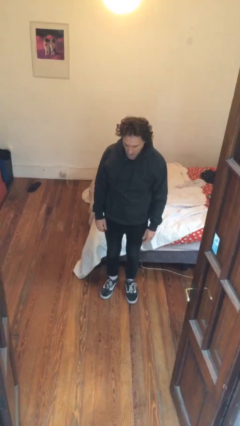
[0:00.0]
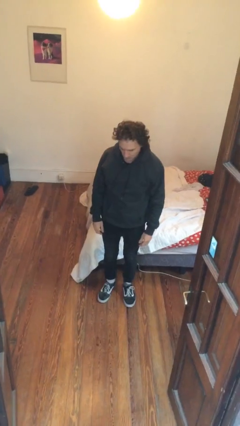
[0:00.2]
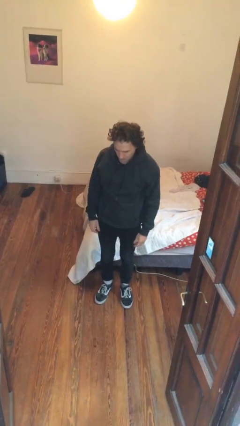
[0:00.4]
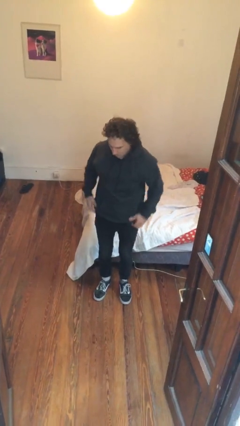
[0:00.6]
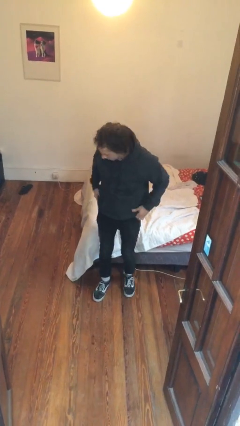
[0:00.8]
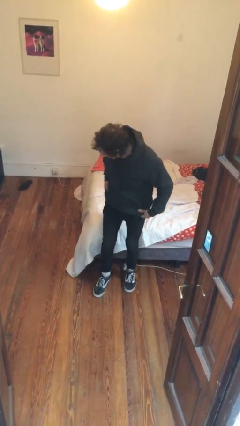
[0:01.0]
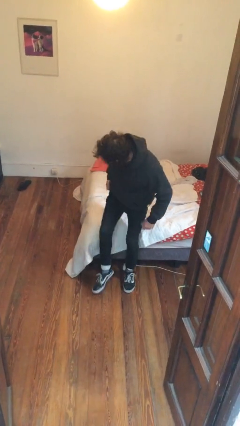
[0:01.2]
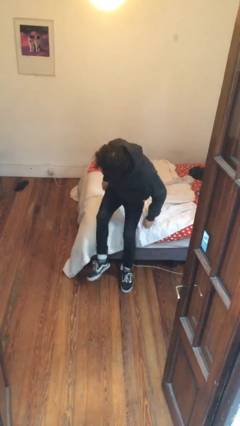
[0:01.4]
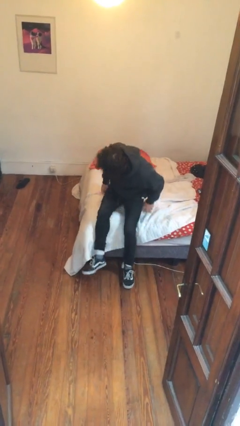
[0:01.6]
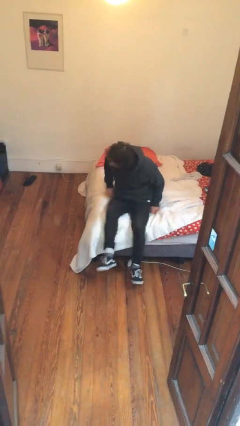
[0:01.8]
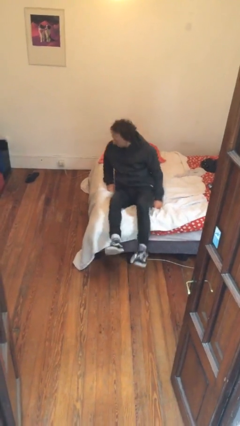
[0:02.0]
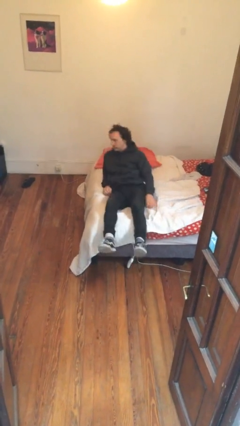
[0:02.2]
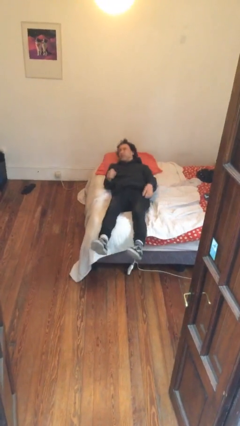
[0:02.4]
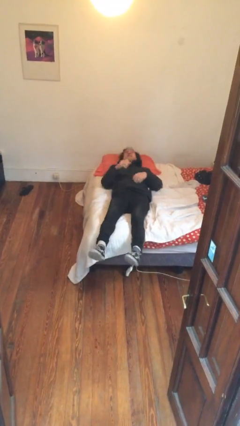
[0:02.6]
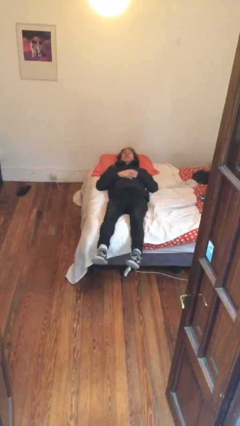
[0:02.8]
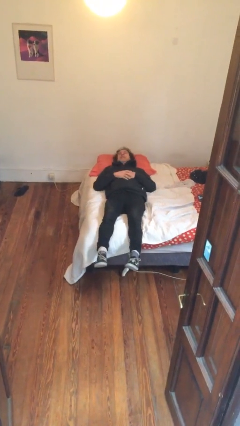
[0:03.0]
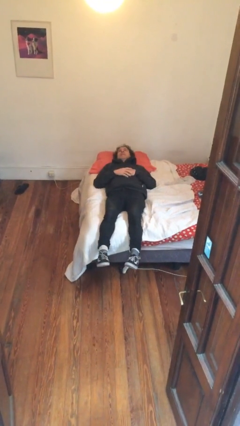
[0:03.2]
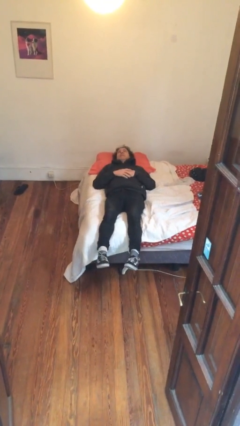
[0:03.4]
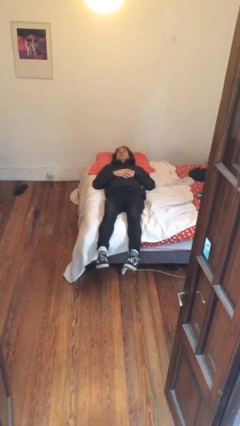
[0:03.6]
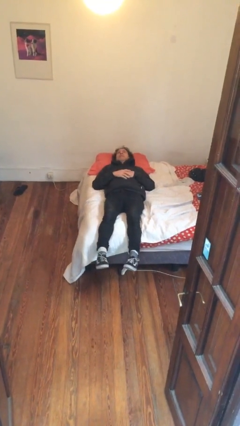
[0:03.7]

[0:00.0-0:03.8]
person lies down on bed

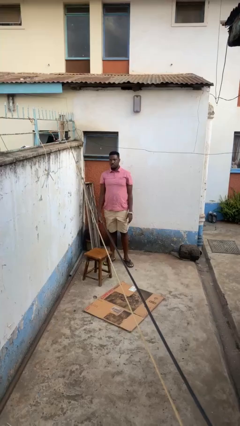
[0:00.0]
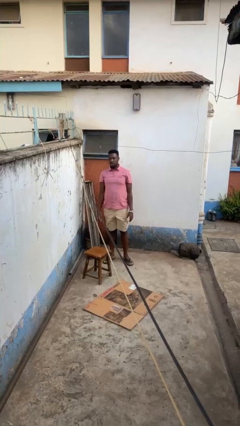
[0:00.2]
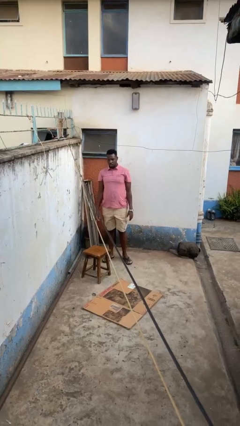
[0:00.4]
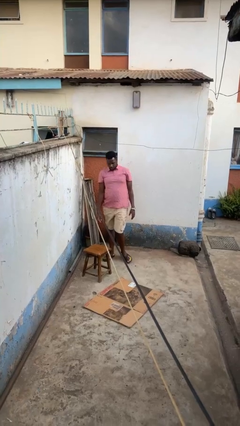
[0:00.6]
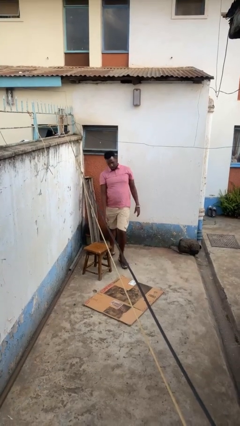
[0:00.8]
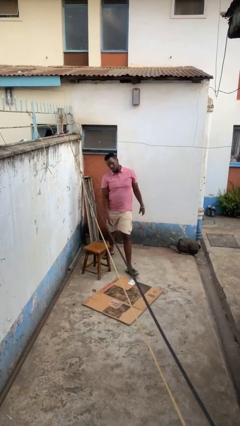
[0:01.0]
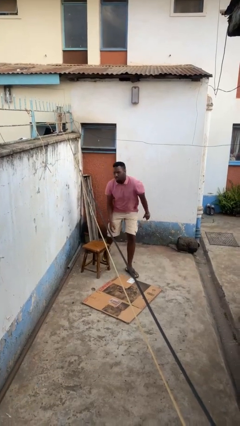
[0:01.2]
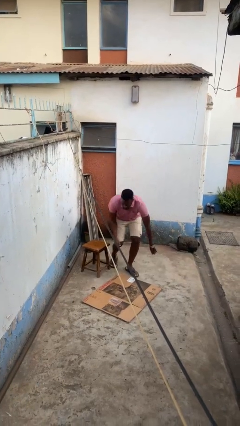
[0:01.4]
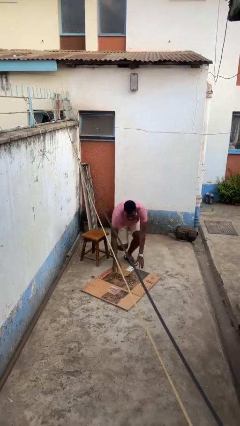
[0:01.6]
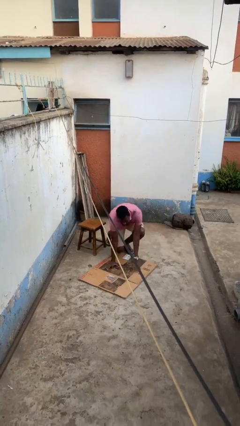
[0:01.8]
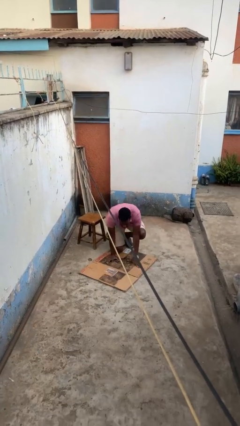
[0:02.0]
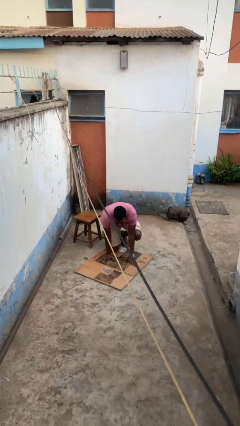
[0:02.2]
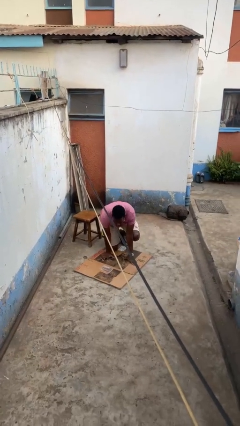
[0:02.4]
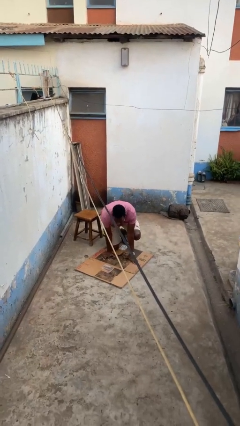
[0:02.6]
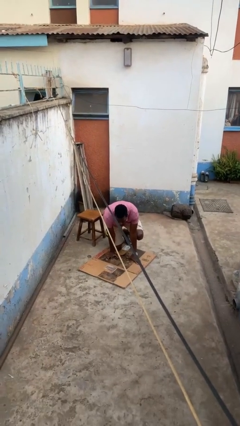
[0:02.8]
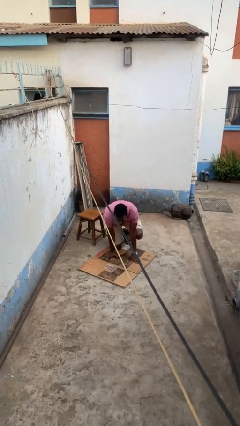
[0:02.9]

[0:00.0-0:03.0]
person trips on object on floor

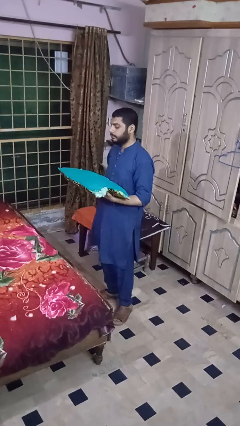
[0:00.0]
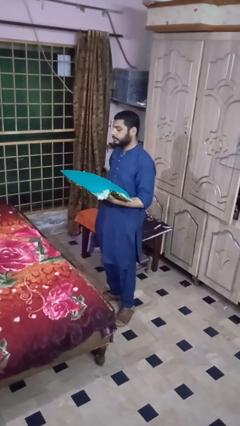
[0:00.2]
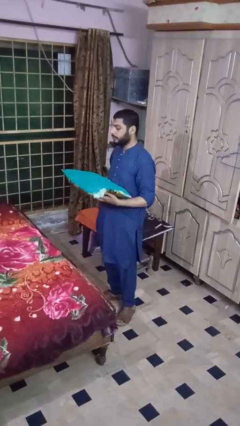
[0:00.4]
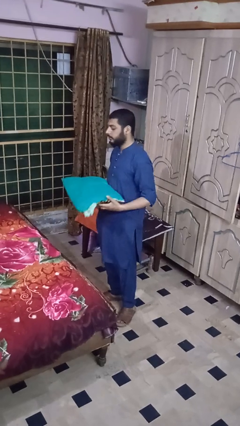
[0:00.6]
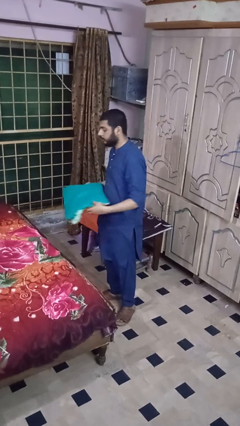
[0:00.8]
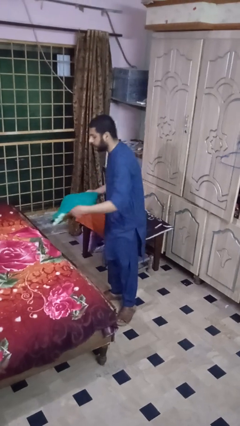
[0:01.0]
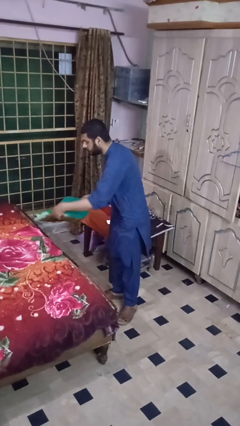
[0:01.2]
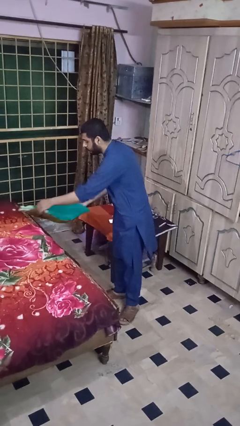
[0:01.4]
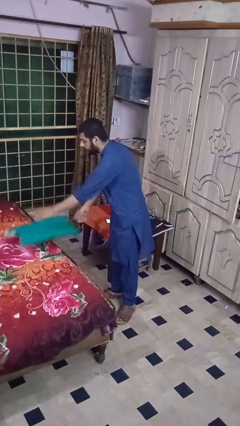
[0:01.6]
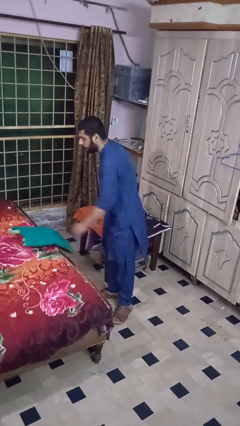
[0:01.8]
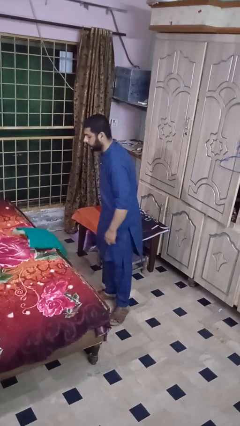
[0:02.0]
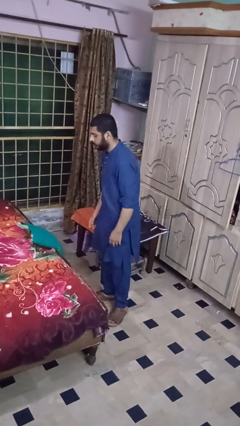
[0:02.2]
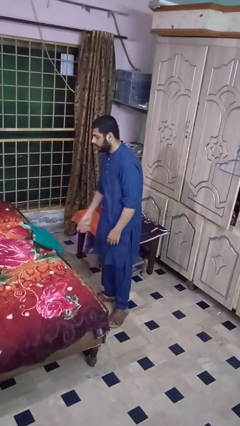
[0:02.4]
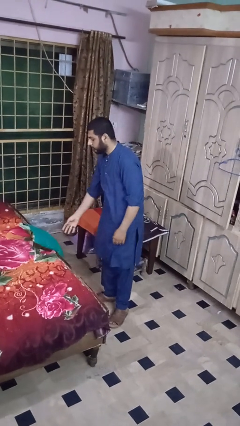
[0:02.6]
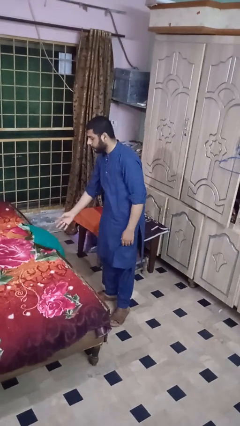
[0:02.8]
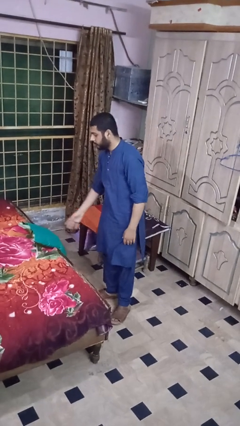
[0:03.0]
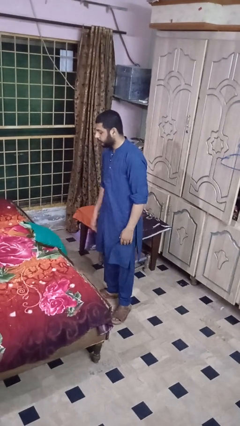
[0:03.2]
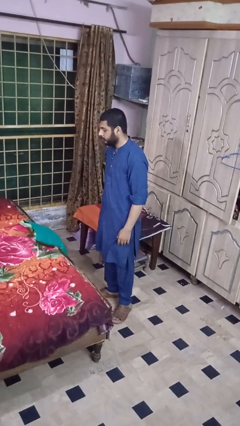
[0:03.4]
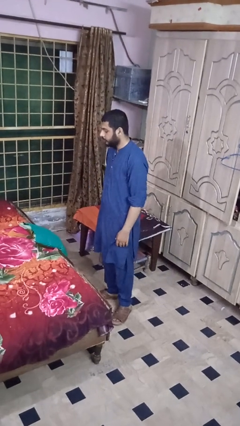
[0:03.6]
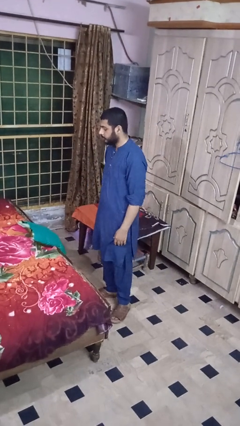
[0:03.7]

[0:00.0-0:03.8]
person puts down object on bed

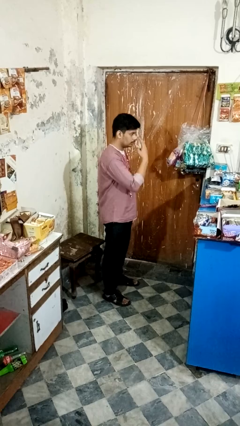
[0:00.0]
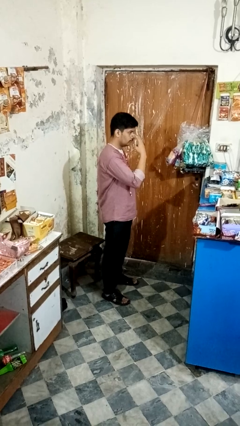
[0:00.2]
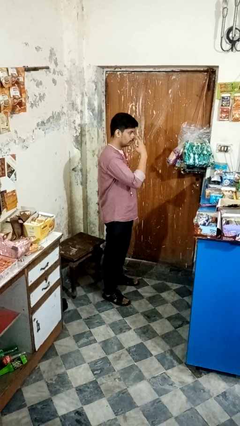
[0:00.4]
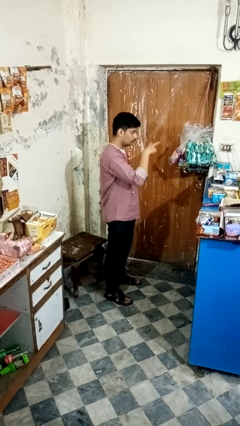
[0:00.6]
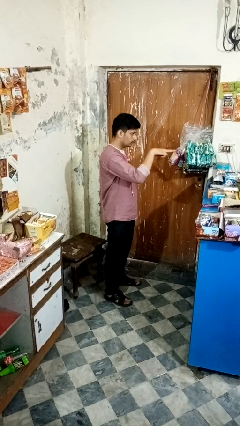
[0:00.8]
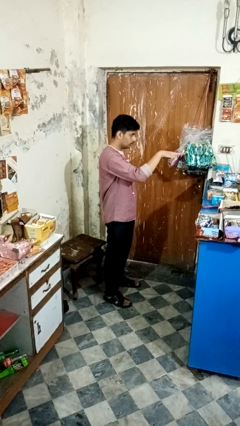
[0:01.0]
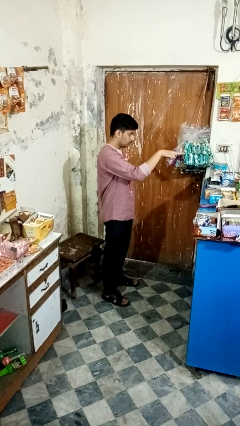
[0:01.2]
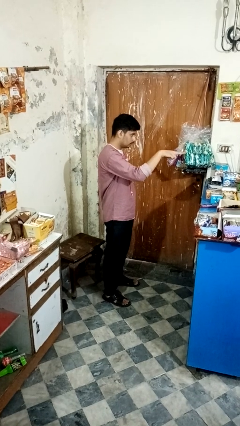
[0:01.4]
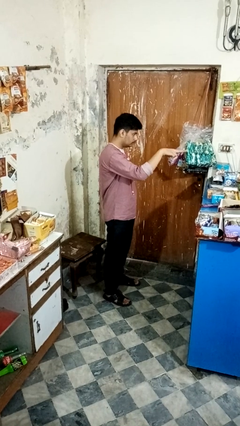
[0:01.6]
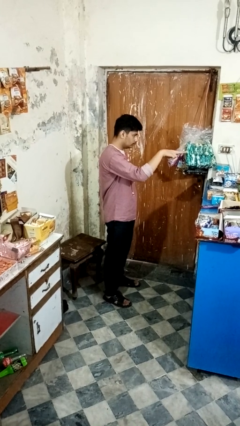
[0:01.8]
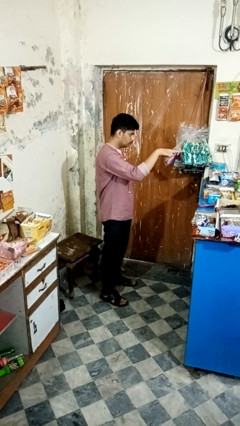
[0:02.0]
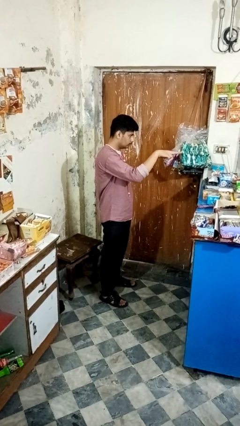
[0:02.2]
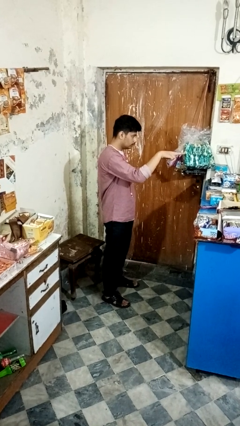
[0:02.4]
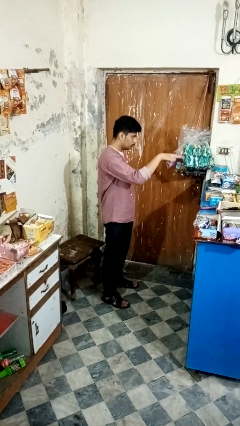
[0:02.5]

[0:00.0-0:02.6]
person gestures watch closely

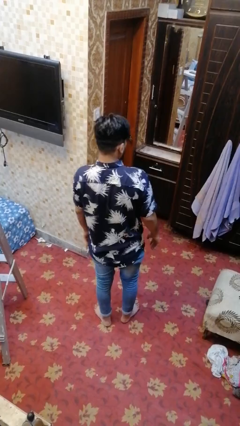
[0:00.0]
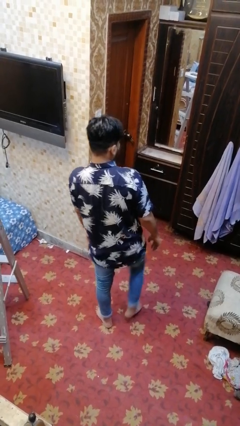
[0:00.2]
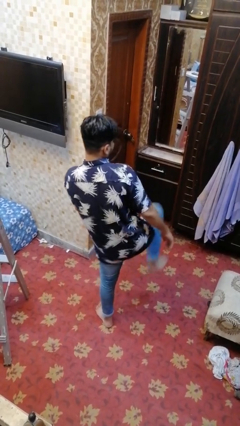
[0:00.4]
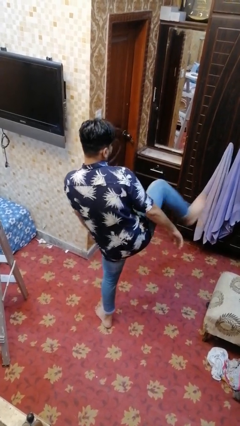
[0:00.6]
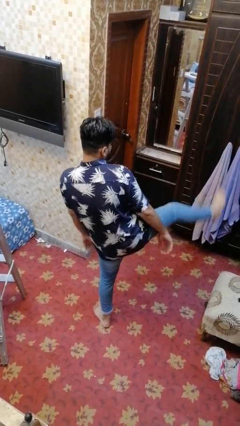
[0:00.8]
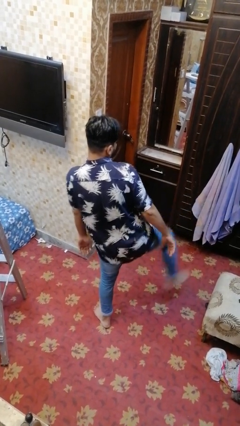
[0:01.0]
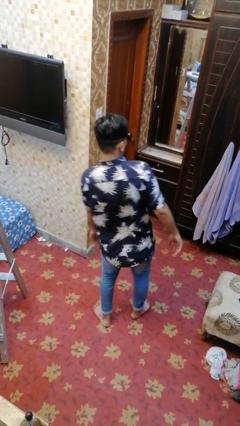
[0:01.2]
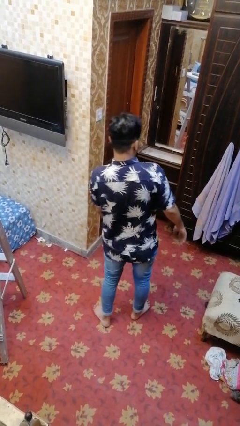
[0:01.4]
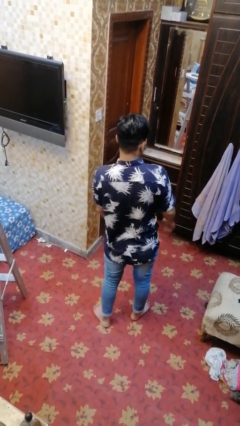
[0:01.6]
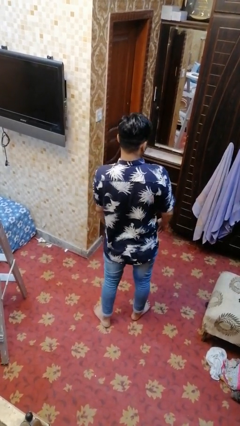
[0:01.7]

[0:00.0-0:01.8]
person karate kicks

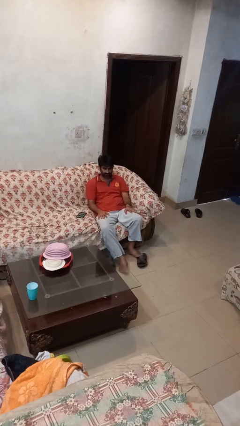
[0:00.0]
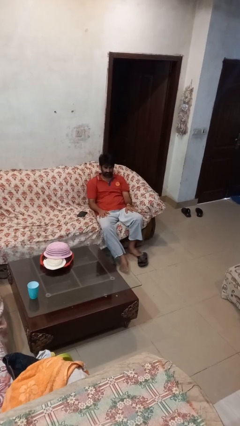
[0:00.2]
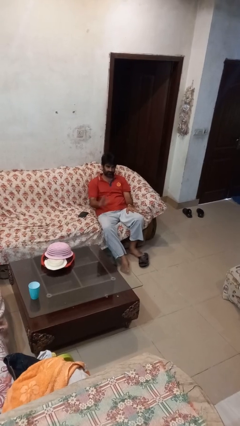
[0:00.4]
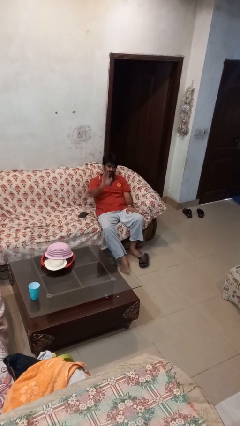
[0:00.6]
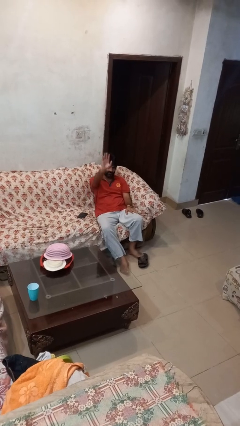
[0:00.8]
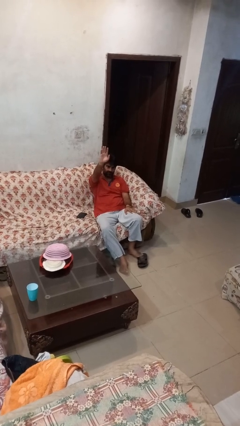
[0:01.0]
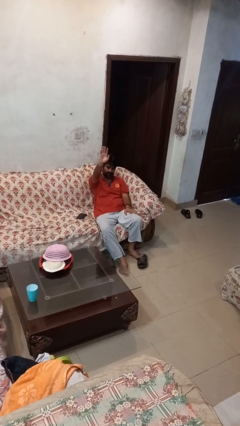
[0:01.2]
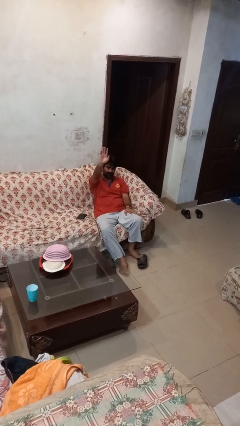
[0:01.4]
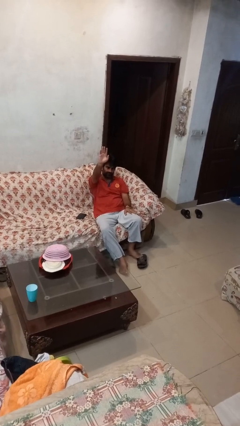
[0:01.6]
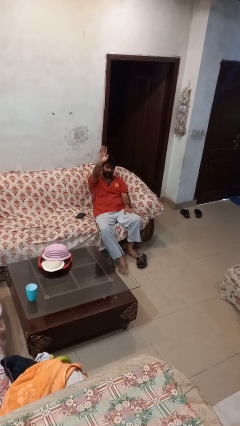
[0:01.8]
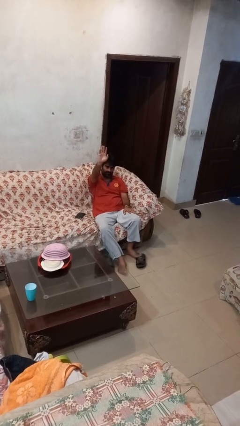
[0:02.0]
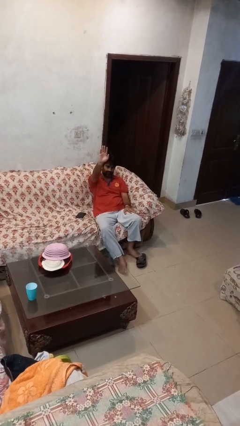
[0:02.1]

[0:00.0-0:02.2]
person gestures raise hand
